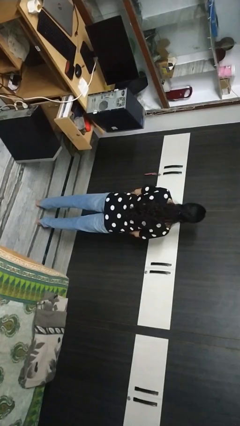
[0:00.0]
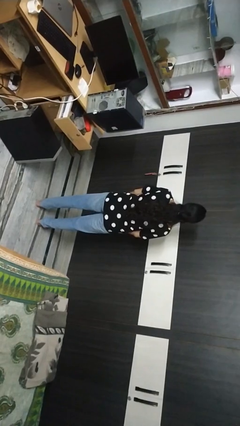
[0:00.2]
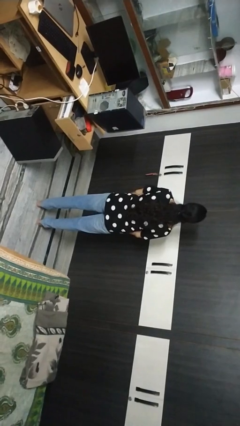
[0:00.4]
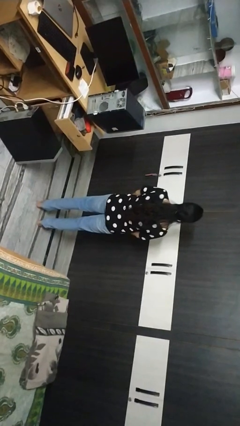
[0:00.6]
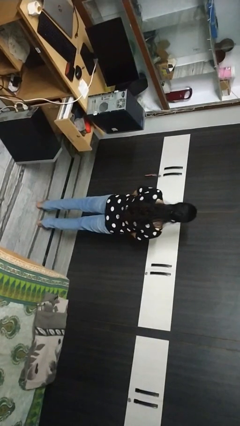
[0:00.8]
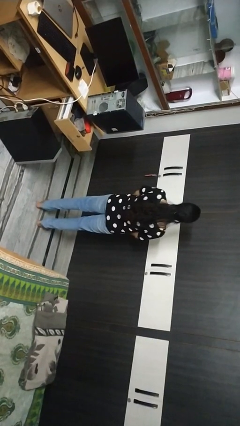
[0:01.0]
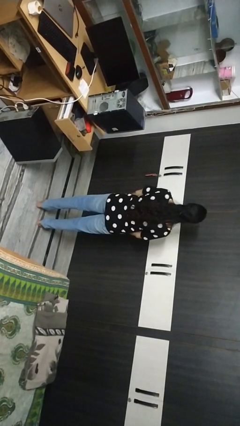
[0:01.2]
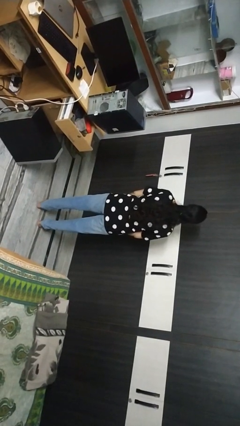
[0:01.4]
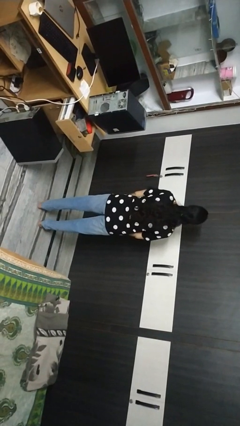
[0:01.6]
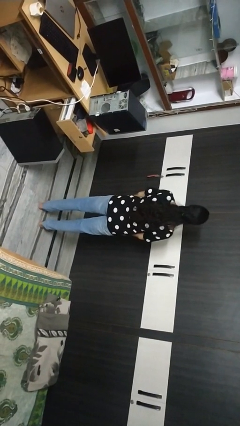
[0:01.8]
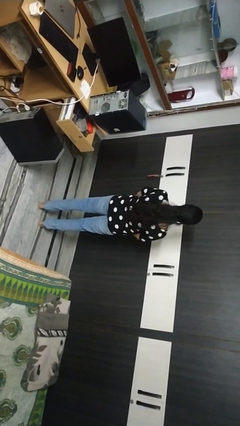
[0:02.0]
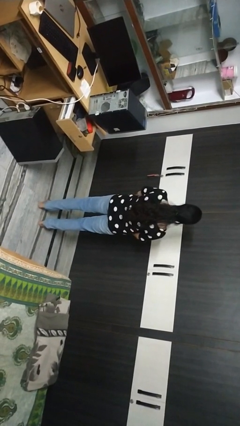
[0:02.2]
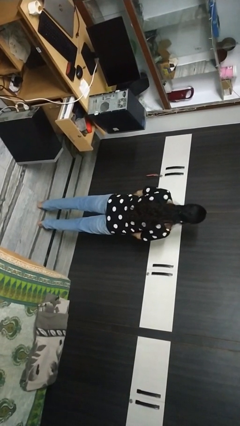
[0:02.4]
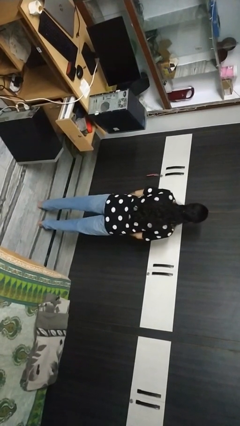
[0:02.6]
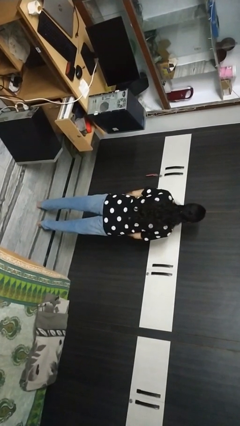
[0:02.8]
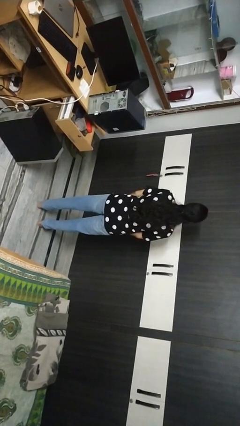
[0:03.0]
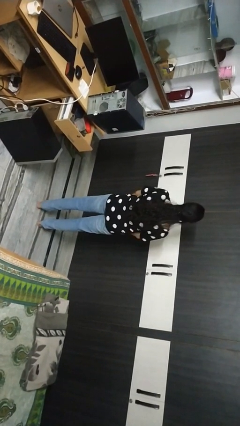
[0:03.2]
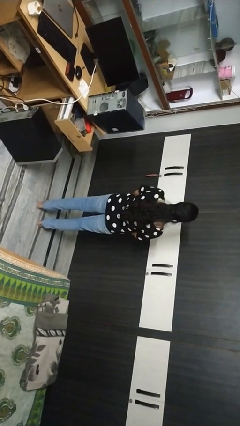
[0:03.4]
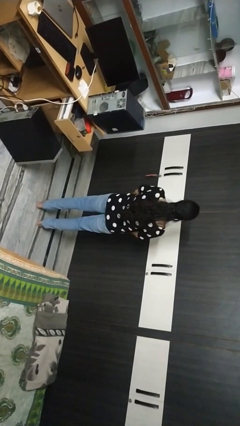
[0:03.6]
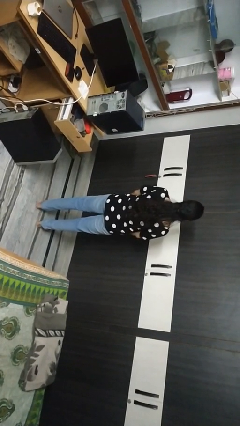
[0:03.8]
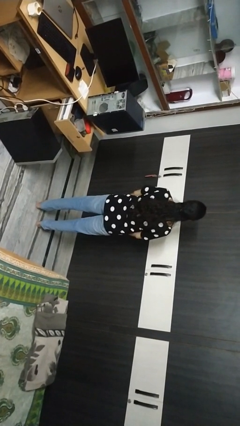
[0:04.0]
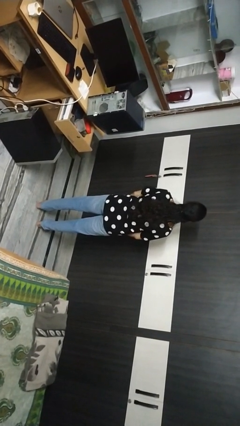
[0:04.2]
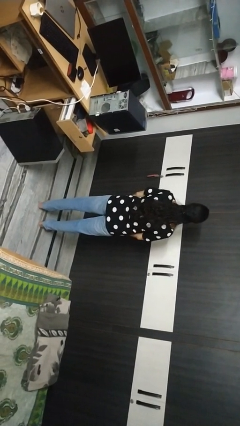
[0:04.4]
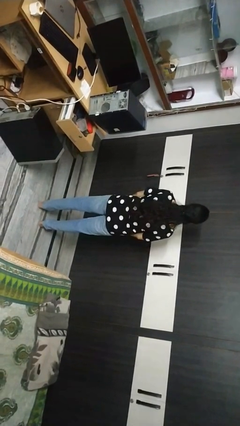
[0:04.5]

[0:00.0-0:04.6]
person wiggles hips

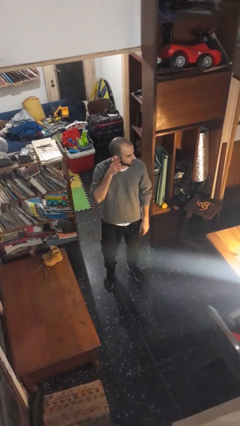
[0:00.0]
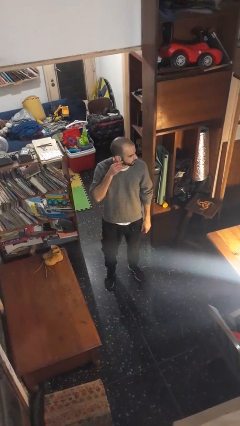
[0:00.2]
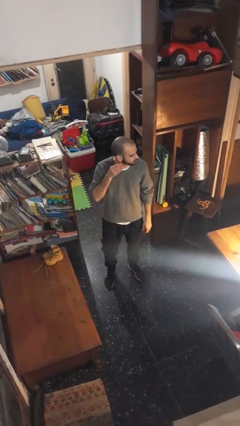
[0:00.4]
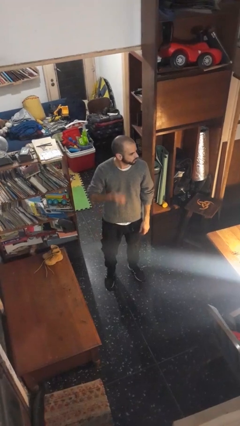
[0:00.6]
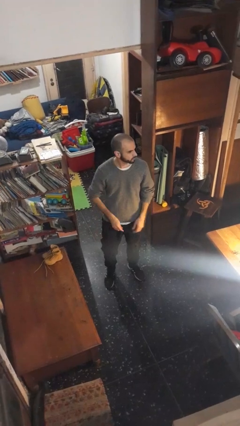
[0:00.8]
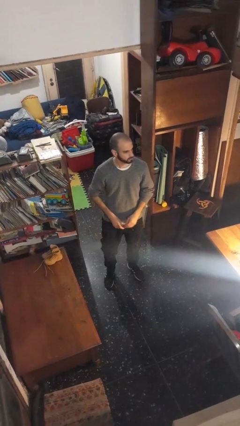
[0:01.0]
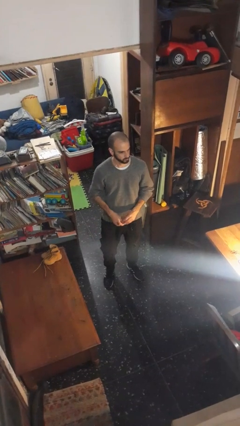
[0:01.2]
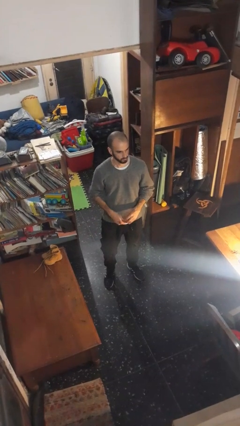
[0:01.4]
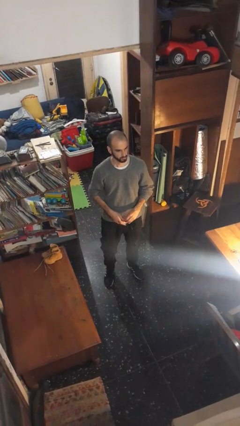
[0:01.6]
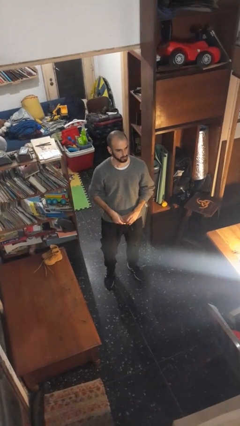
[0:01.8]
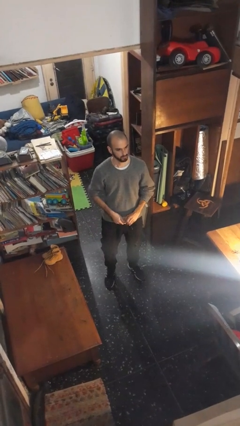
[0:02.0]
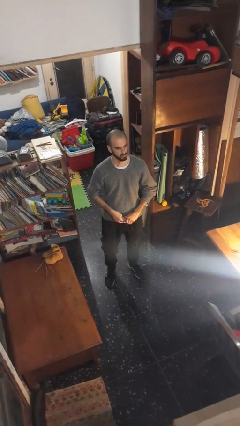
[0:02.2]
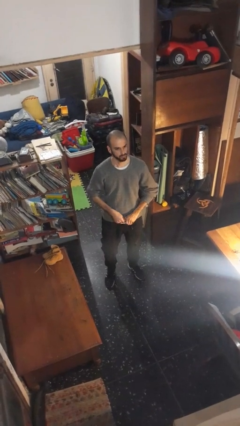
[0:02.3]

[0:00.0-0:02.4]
person takes off earrings

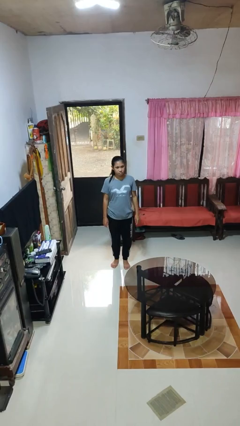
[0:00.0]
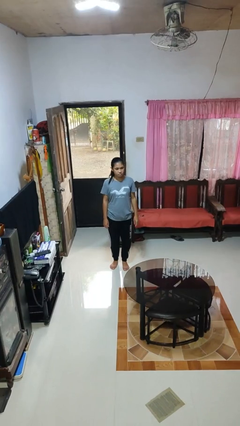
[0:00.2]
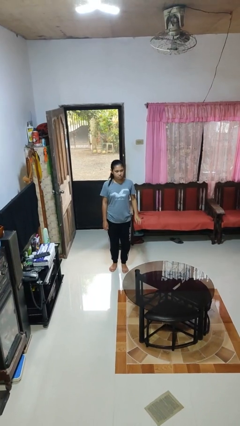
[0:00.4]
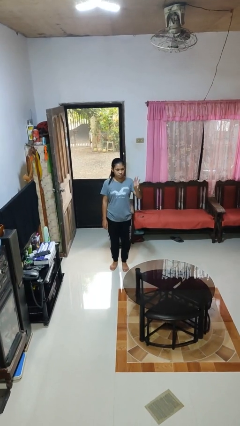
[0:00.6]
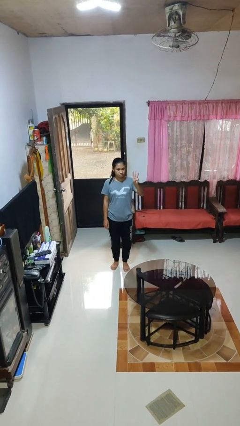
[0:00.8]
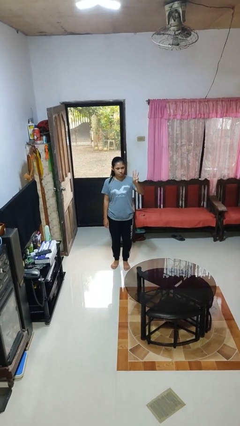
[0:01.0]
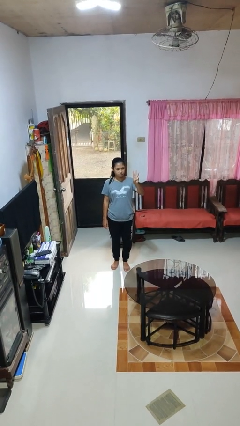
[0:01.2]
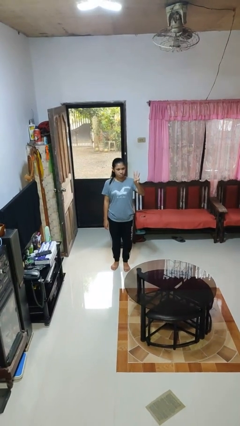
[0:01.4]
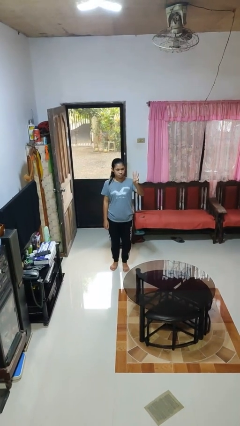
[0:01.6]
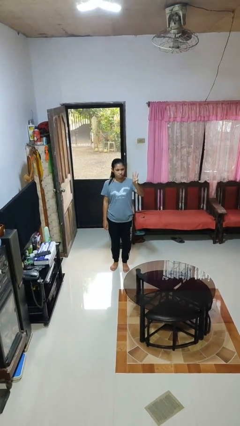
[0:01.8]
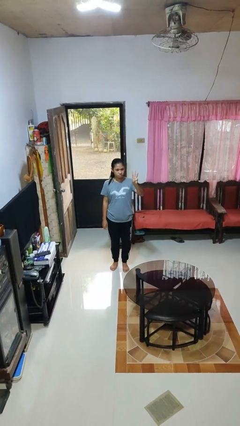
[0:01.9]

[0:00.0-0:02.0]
person gestures number three

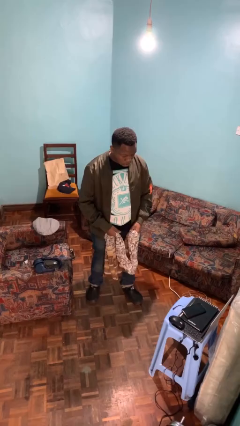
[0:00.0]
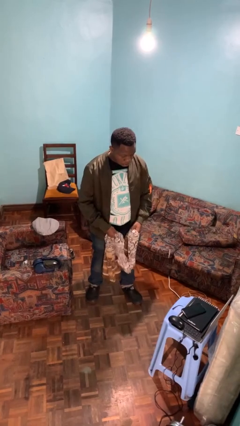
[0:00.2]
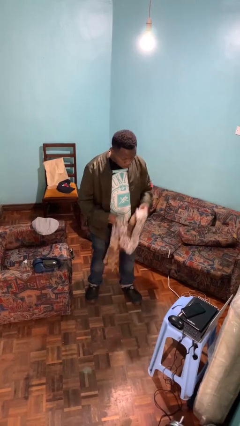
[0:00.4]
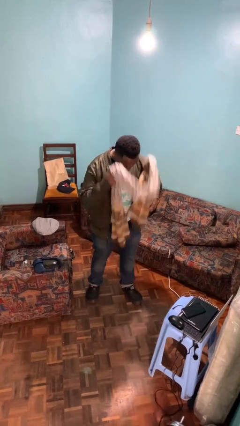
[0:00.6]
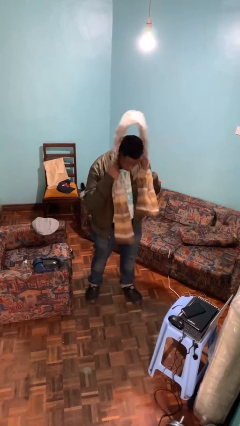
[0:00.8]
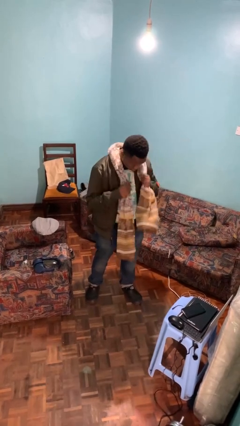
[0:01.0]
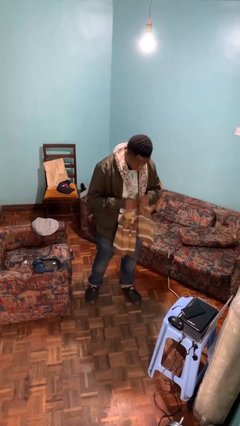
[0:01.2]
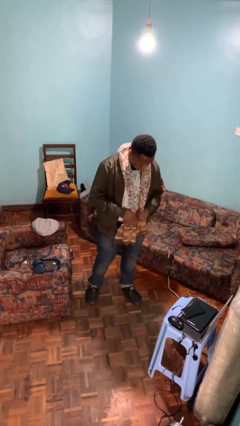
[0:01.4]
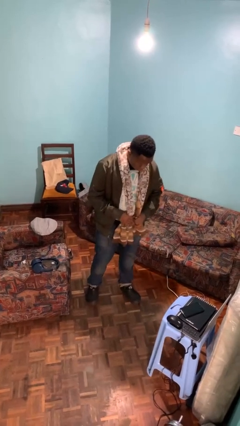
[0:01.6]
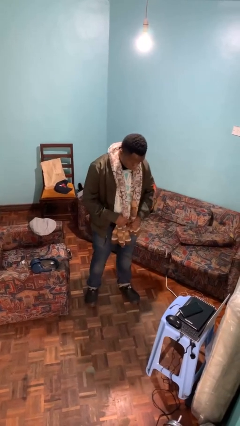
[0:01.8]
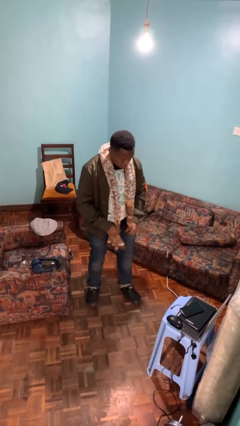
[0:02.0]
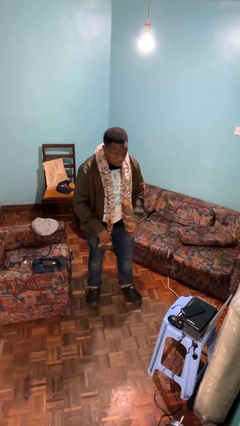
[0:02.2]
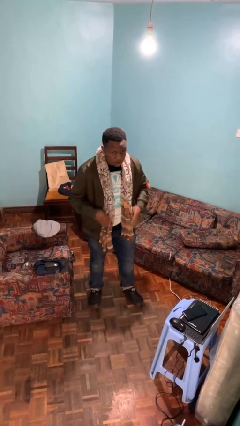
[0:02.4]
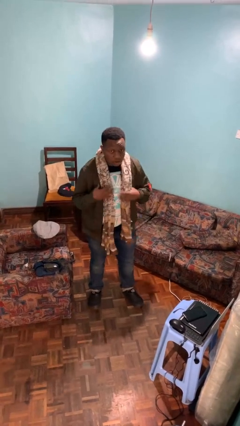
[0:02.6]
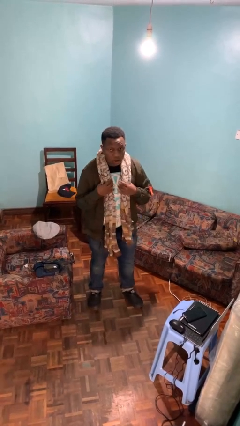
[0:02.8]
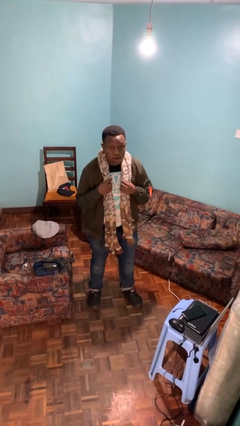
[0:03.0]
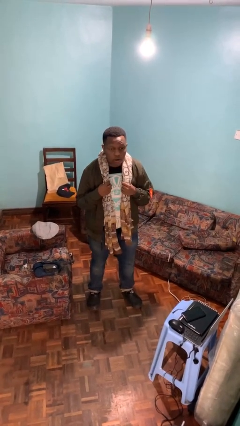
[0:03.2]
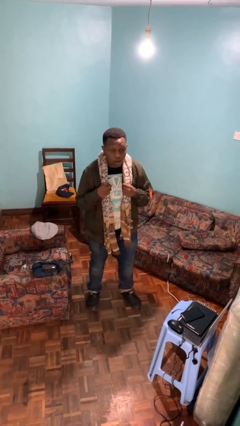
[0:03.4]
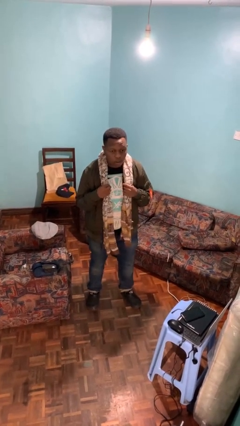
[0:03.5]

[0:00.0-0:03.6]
person puts on scarf

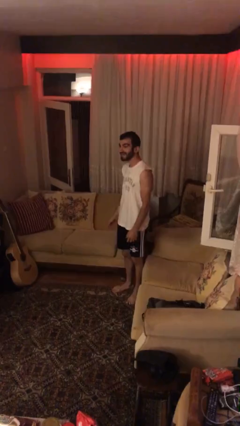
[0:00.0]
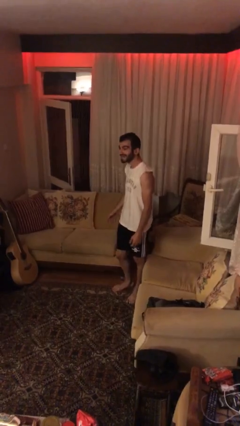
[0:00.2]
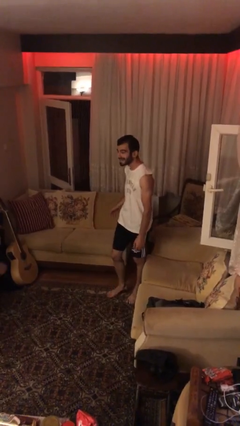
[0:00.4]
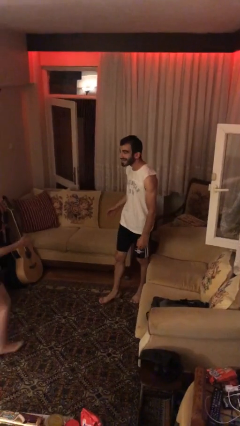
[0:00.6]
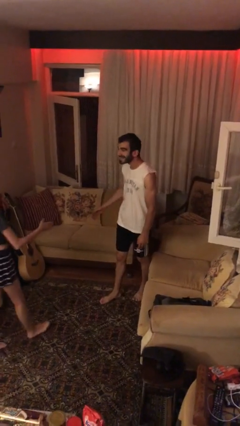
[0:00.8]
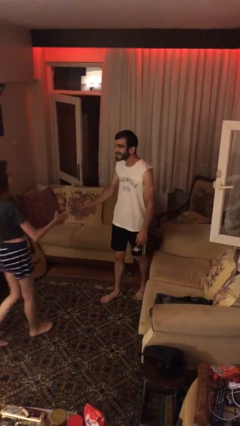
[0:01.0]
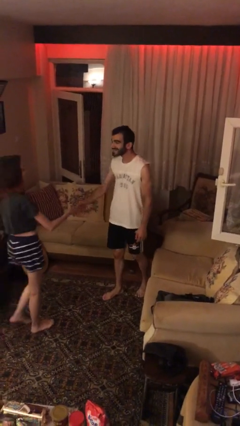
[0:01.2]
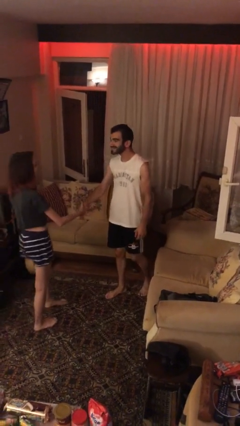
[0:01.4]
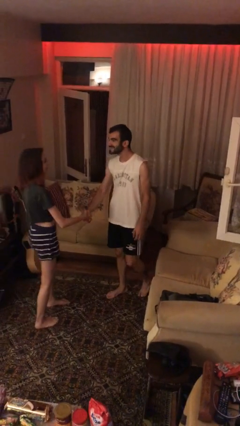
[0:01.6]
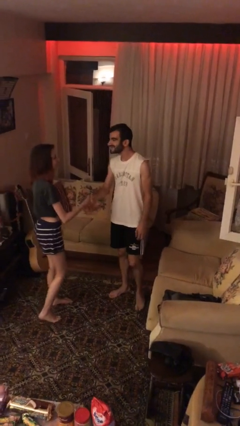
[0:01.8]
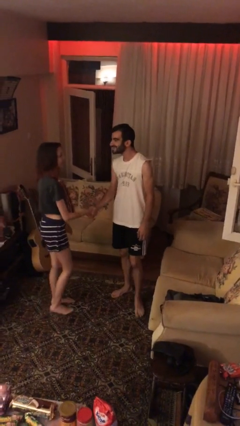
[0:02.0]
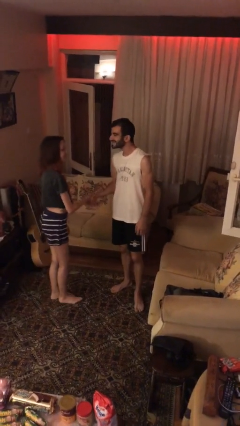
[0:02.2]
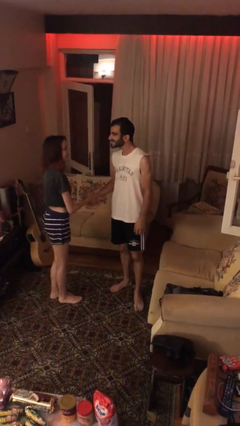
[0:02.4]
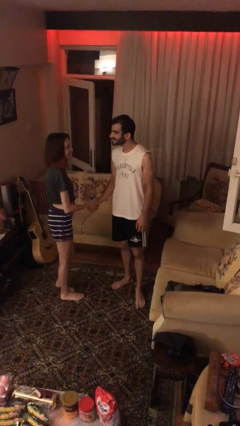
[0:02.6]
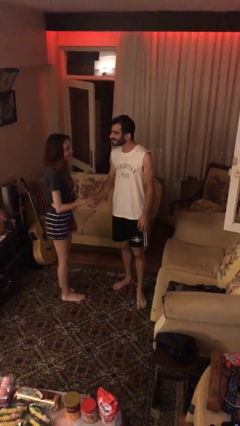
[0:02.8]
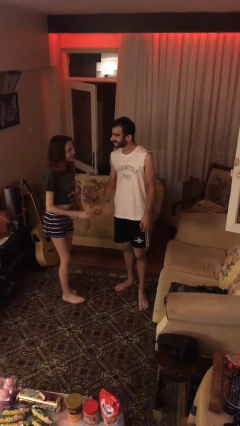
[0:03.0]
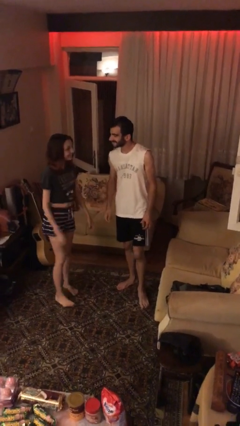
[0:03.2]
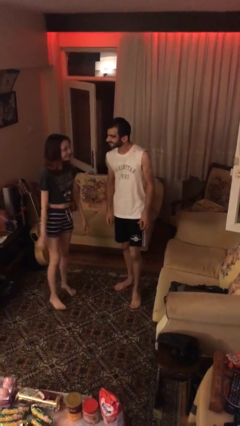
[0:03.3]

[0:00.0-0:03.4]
person shakes hand

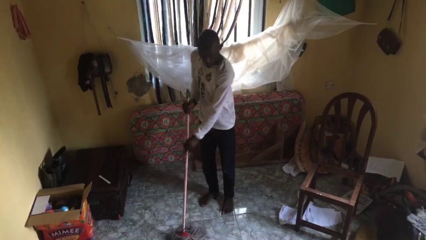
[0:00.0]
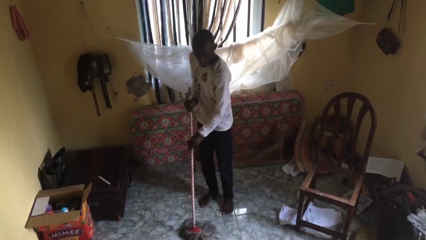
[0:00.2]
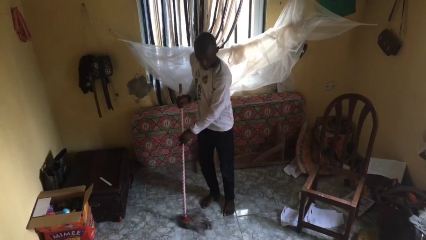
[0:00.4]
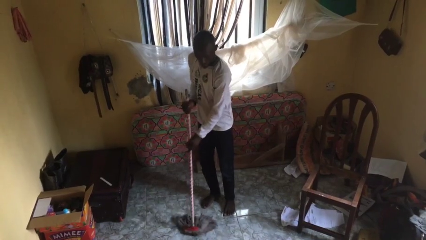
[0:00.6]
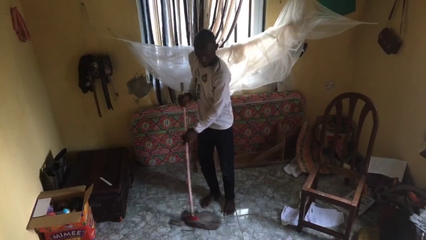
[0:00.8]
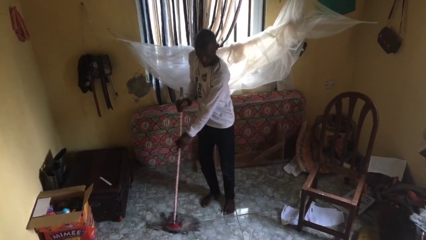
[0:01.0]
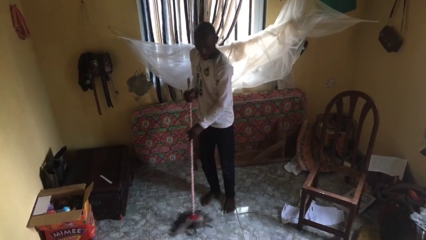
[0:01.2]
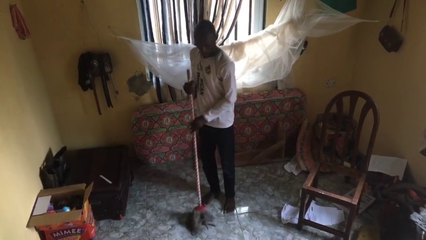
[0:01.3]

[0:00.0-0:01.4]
person mops

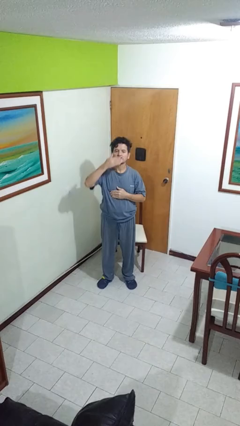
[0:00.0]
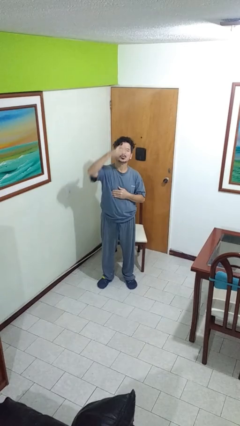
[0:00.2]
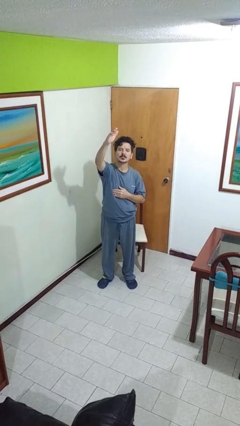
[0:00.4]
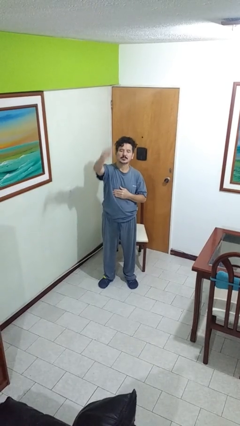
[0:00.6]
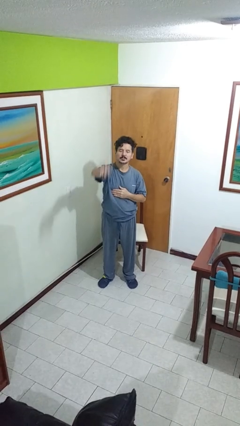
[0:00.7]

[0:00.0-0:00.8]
person gestures blow kiss
